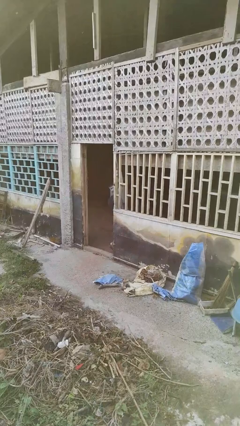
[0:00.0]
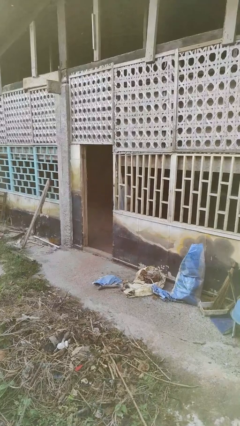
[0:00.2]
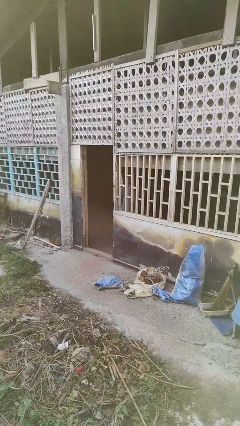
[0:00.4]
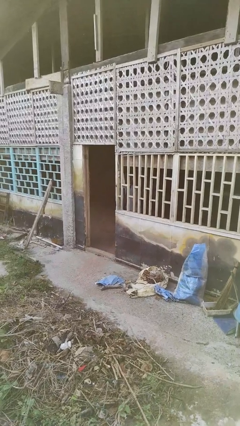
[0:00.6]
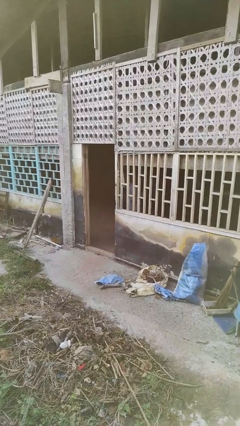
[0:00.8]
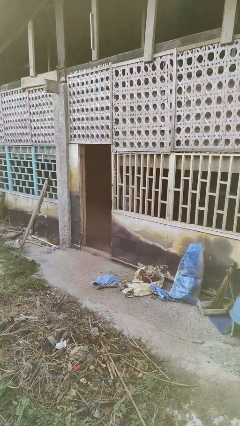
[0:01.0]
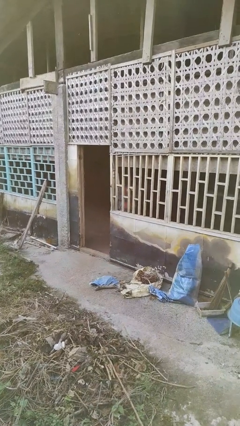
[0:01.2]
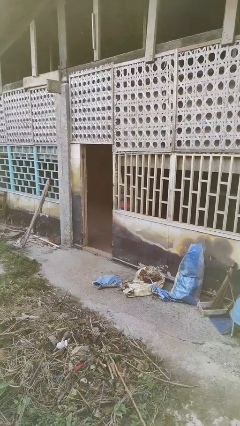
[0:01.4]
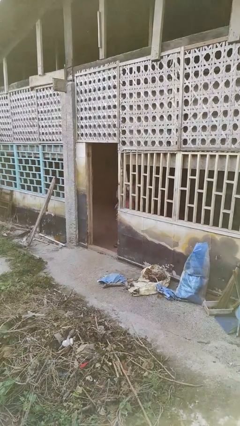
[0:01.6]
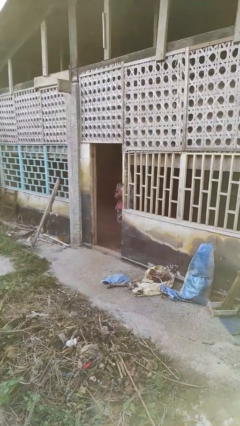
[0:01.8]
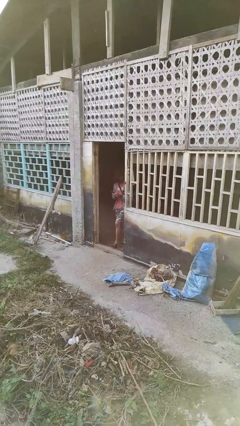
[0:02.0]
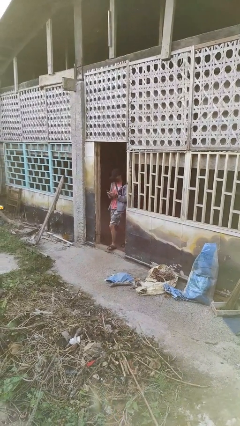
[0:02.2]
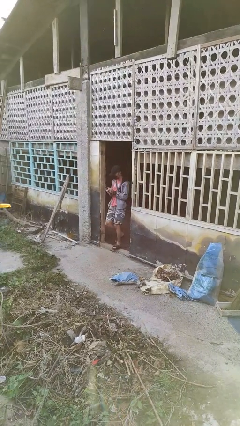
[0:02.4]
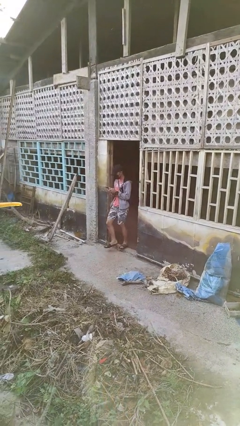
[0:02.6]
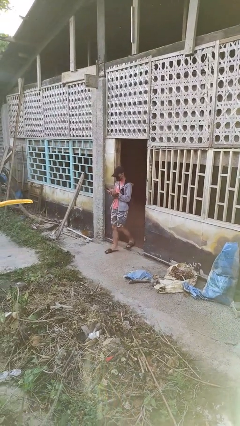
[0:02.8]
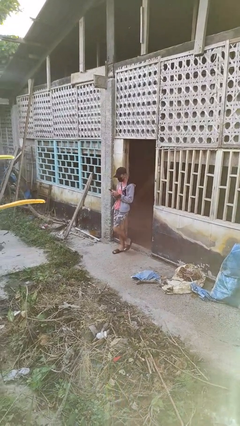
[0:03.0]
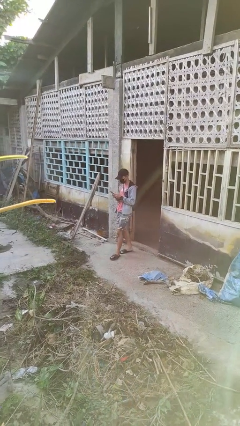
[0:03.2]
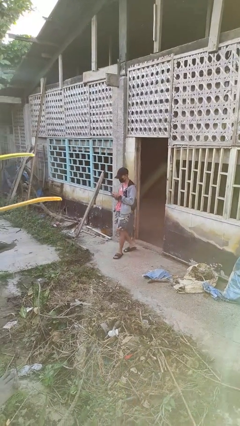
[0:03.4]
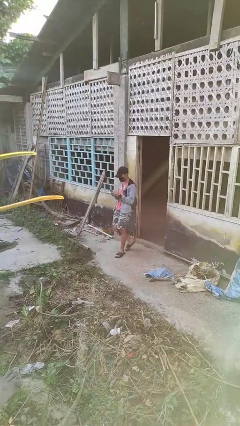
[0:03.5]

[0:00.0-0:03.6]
person enters scene through structure

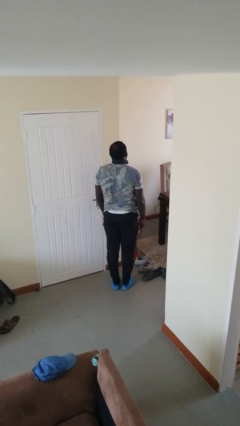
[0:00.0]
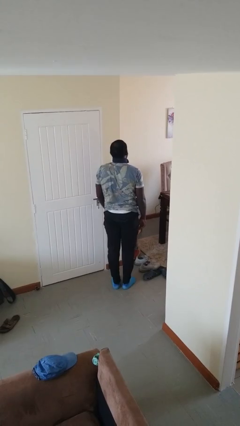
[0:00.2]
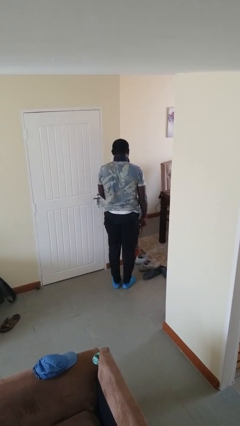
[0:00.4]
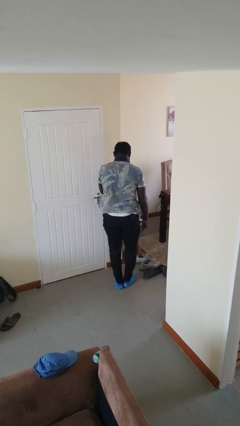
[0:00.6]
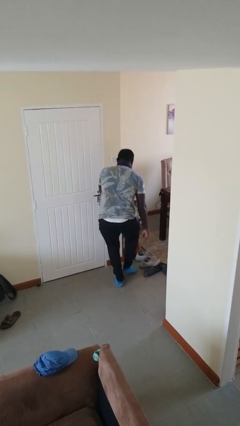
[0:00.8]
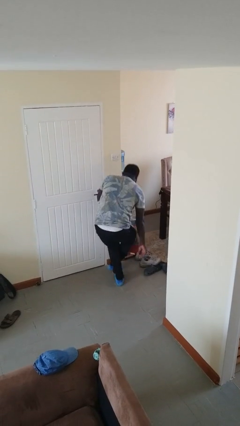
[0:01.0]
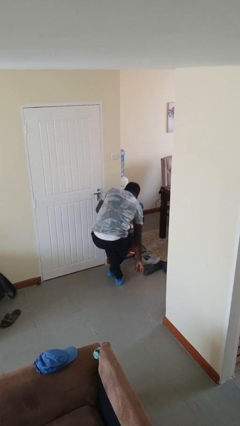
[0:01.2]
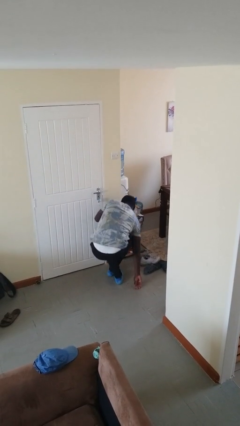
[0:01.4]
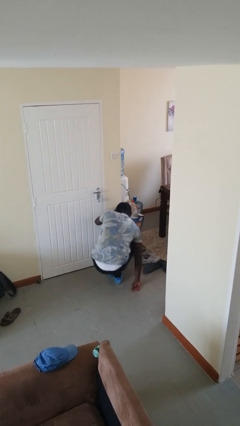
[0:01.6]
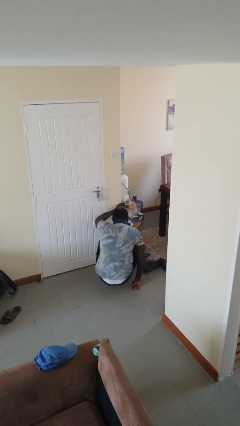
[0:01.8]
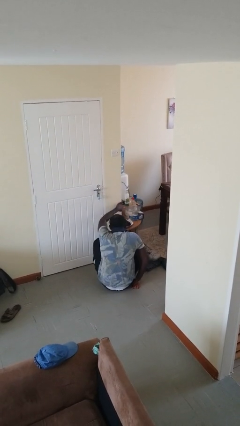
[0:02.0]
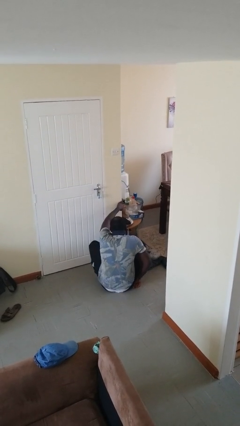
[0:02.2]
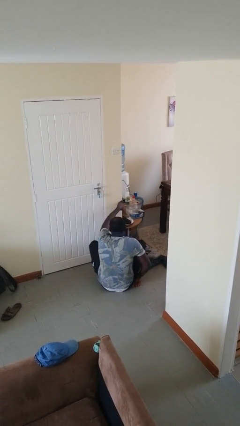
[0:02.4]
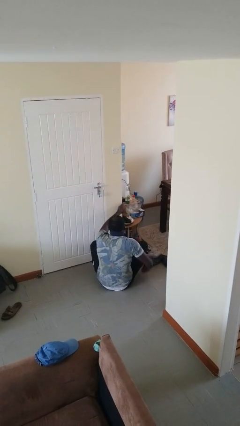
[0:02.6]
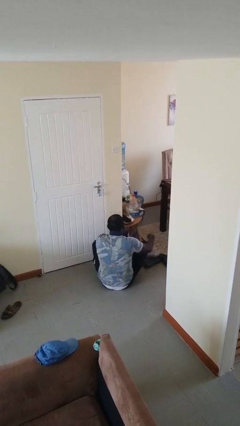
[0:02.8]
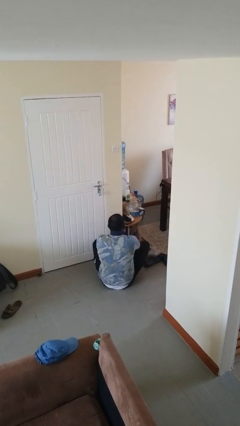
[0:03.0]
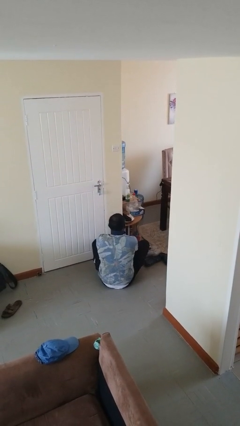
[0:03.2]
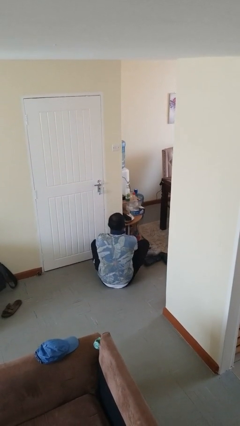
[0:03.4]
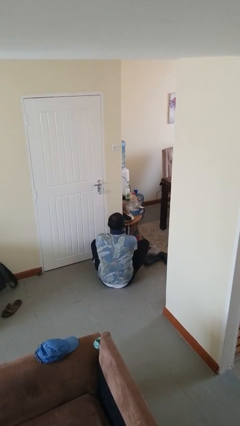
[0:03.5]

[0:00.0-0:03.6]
person sits crisscross

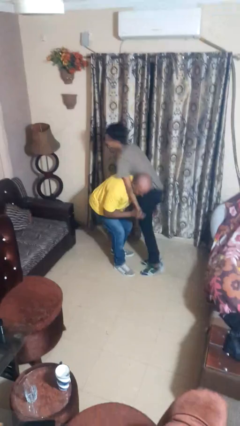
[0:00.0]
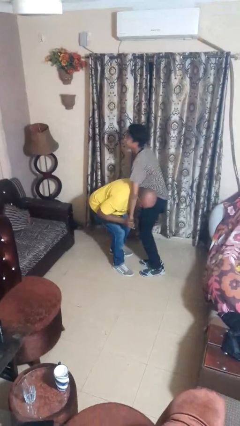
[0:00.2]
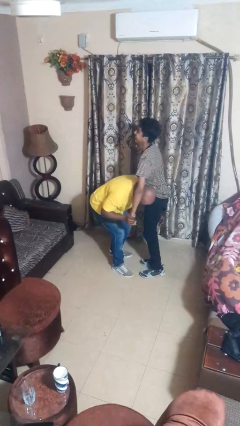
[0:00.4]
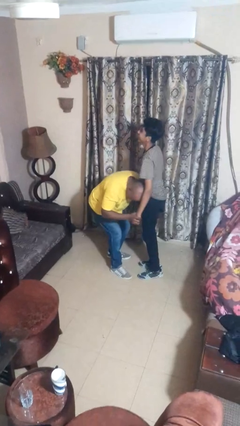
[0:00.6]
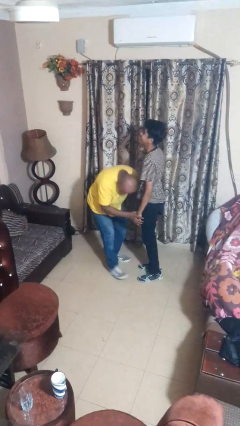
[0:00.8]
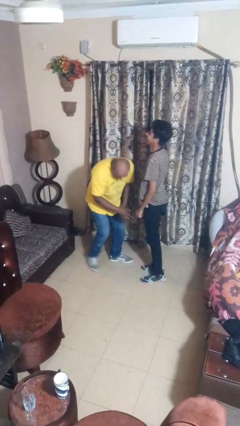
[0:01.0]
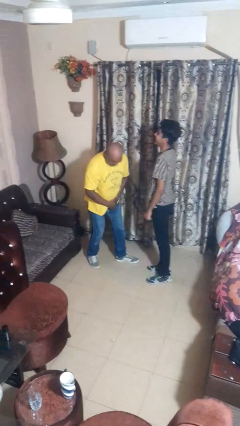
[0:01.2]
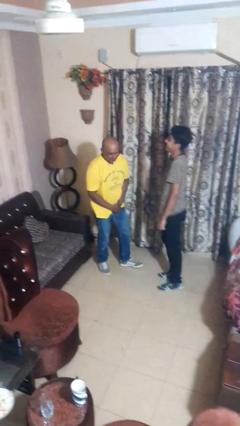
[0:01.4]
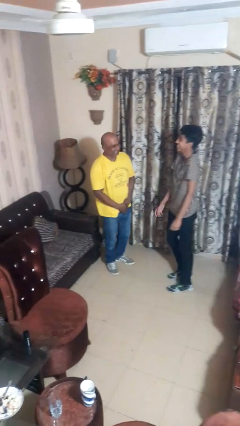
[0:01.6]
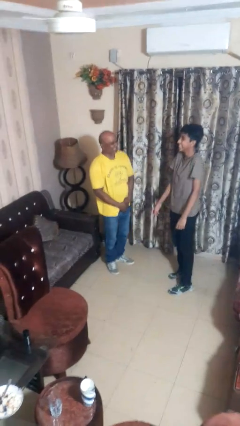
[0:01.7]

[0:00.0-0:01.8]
person puts down person

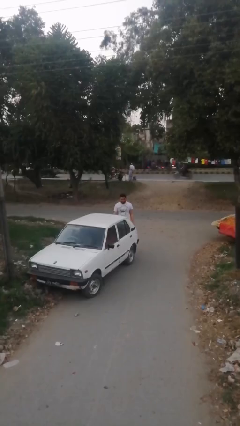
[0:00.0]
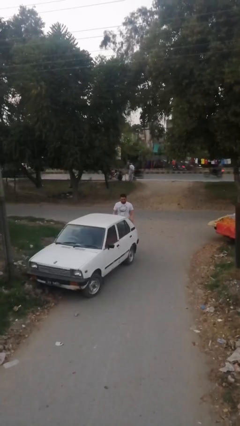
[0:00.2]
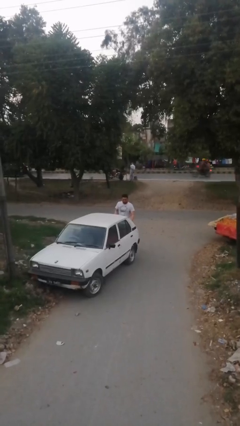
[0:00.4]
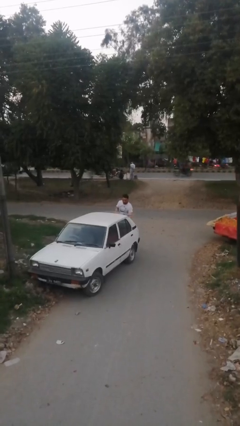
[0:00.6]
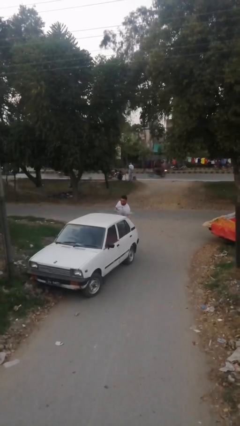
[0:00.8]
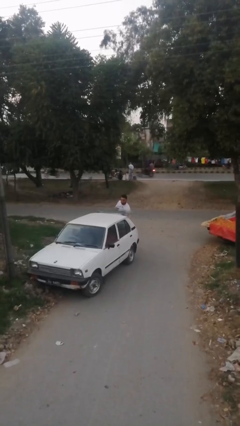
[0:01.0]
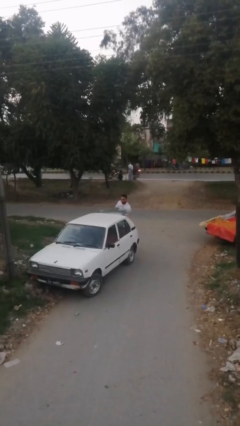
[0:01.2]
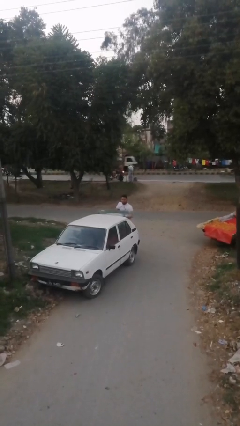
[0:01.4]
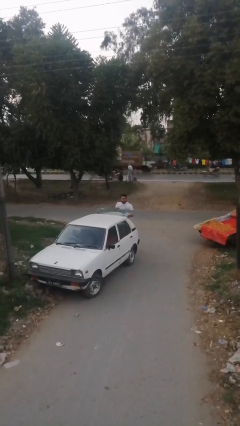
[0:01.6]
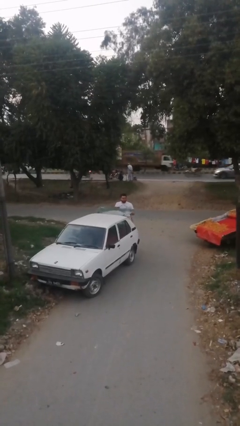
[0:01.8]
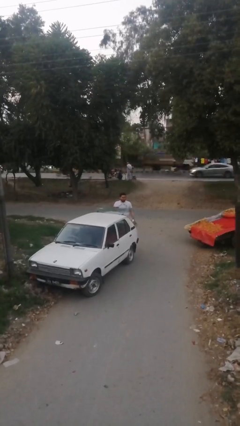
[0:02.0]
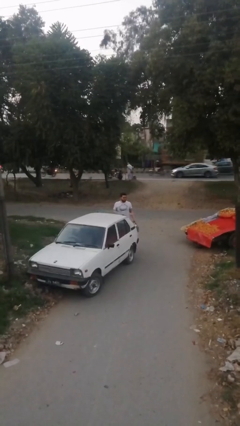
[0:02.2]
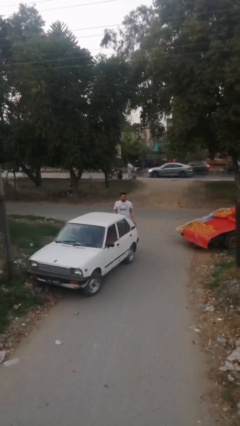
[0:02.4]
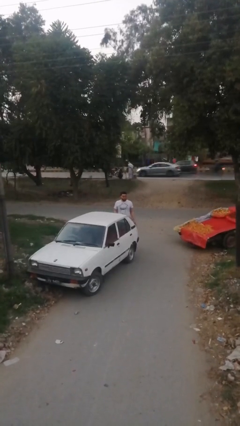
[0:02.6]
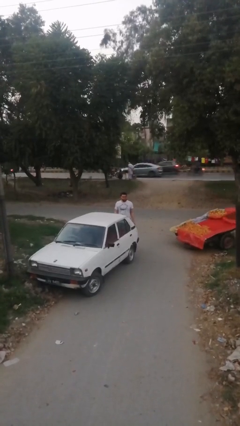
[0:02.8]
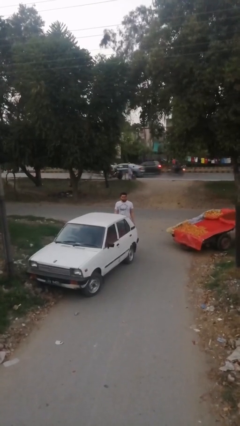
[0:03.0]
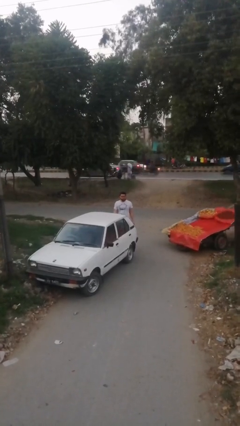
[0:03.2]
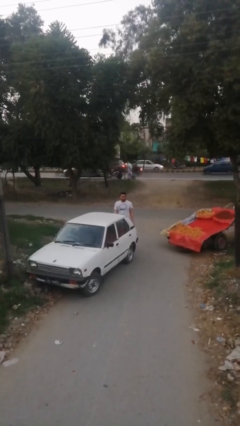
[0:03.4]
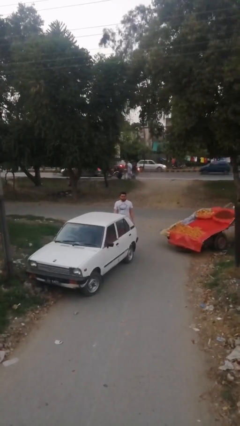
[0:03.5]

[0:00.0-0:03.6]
person unloads car

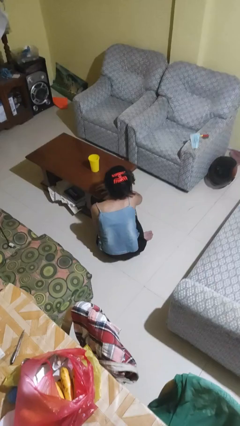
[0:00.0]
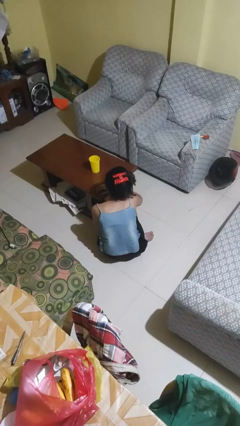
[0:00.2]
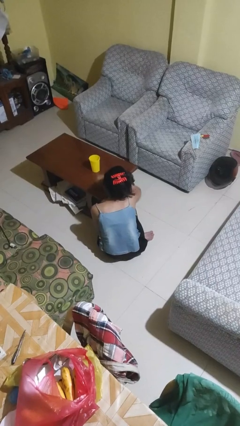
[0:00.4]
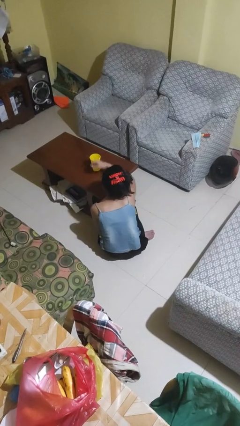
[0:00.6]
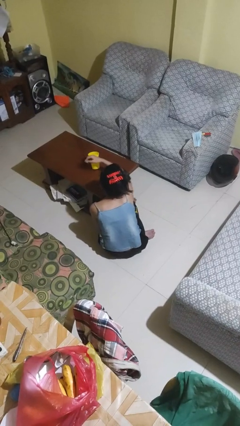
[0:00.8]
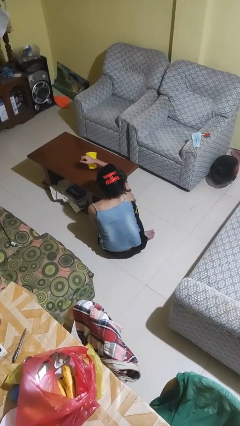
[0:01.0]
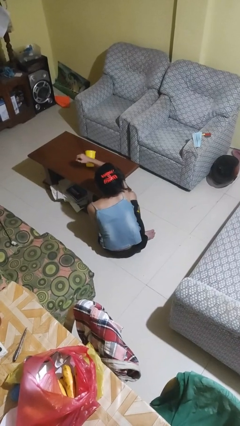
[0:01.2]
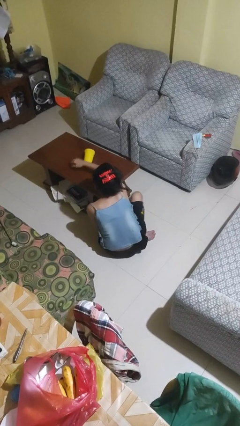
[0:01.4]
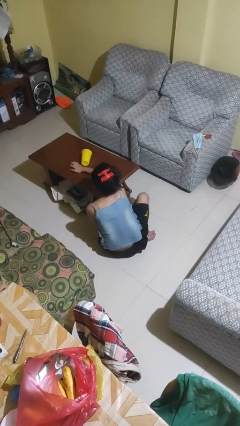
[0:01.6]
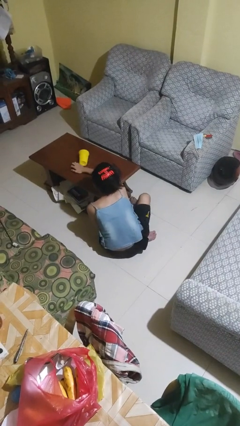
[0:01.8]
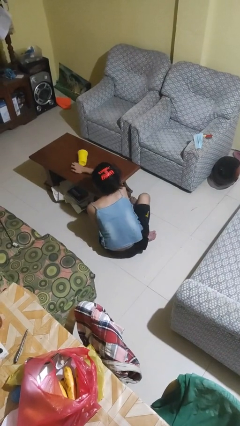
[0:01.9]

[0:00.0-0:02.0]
person knocks over glass

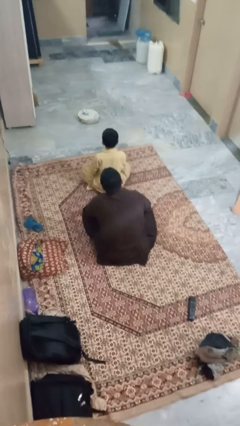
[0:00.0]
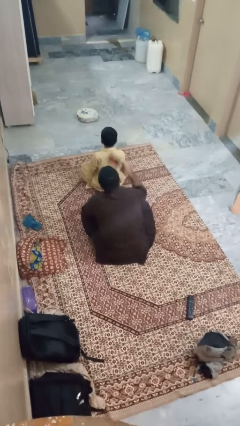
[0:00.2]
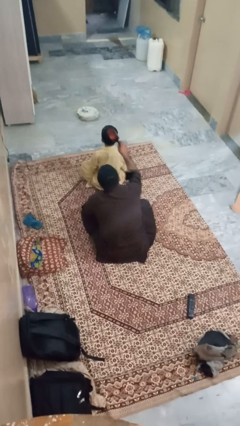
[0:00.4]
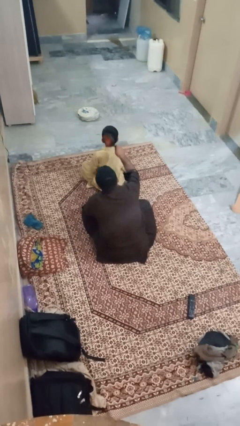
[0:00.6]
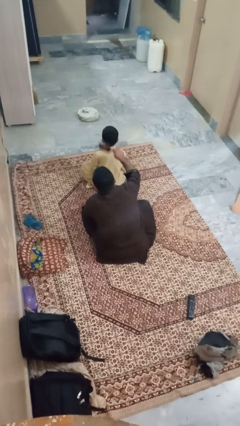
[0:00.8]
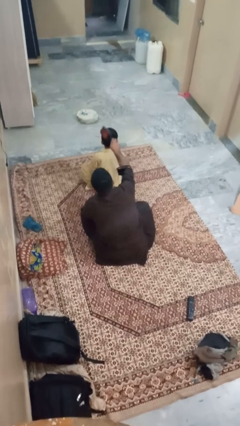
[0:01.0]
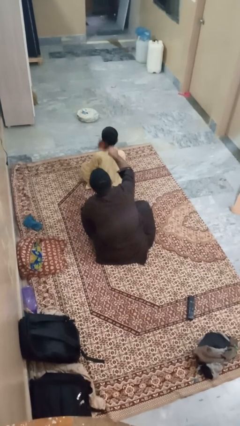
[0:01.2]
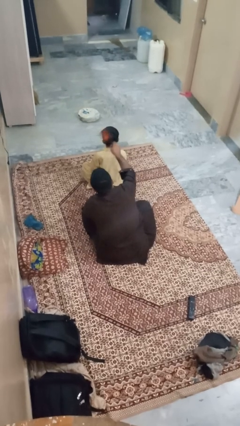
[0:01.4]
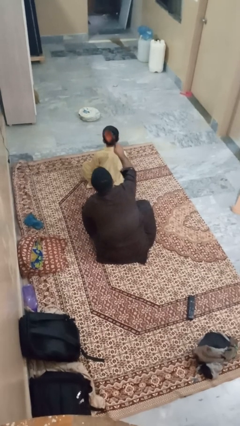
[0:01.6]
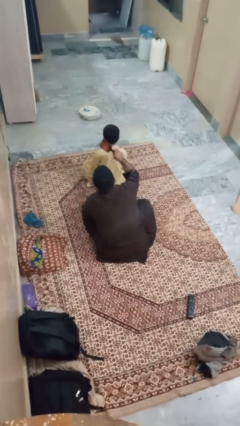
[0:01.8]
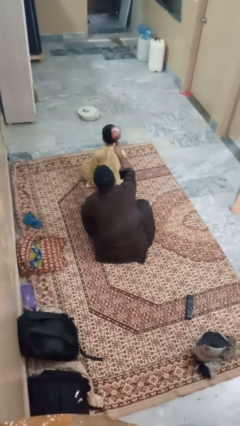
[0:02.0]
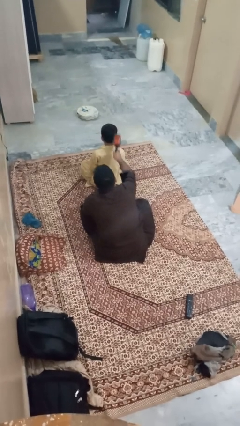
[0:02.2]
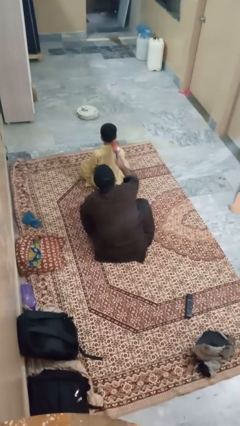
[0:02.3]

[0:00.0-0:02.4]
person brushes hair of person
